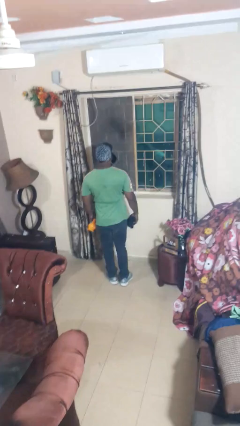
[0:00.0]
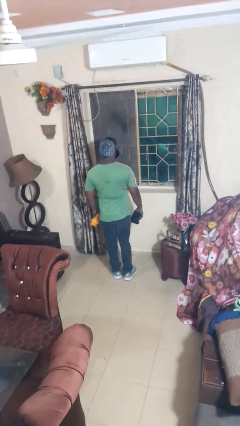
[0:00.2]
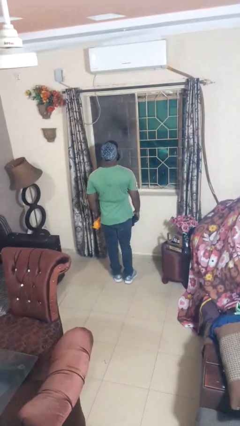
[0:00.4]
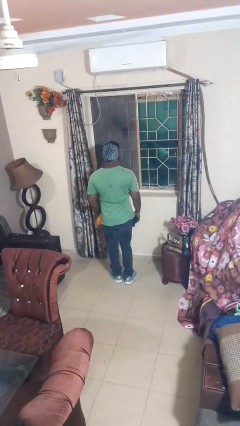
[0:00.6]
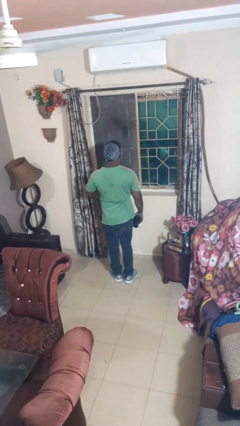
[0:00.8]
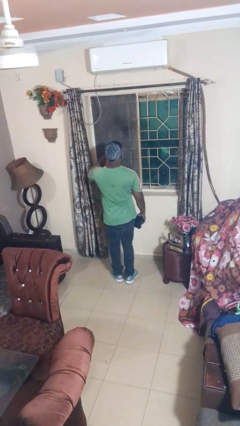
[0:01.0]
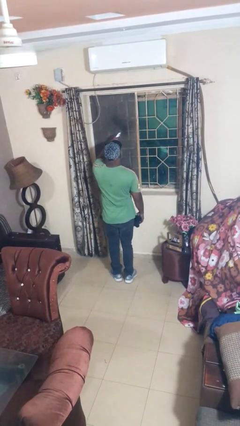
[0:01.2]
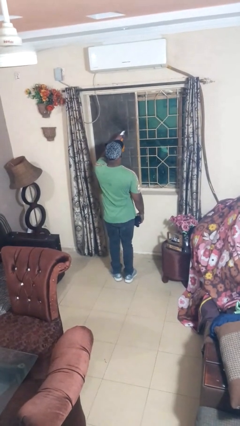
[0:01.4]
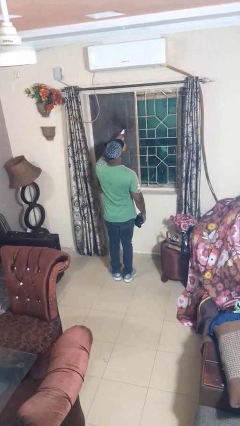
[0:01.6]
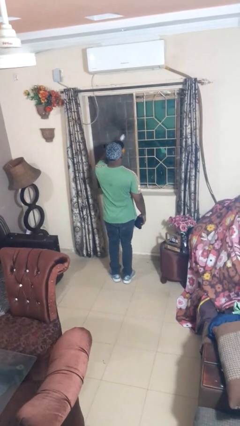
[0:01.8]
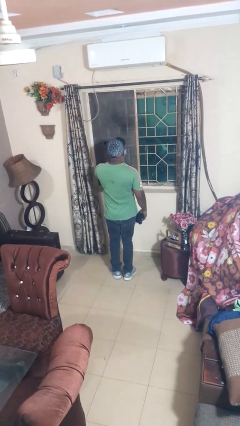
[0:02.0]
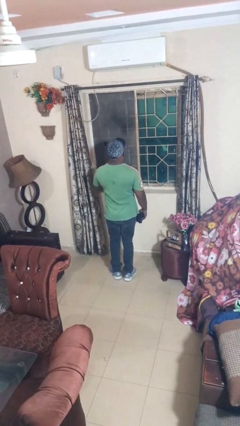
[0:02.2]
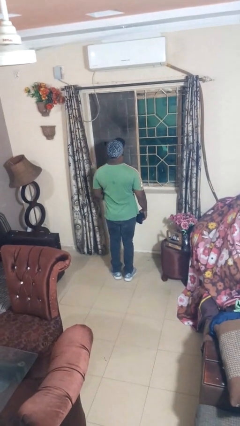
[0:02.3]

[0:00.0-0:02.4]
person sprays from bottle

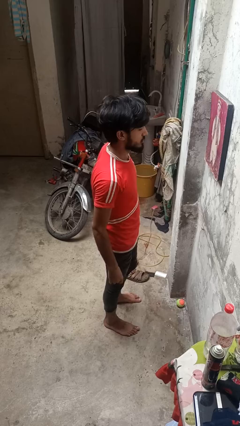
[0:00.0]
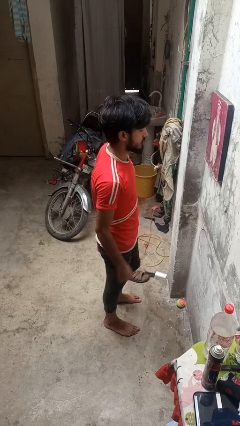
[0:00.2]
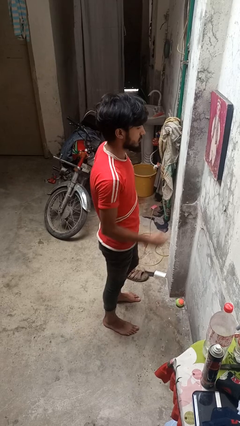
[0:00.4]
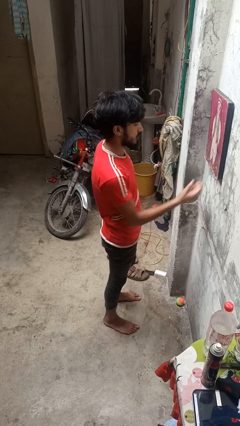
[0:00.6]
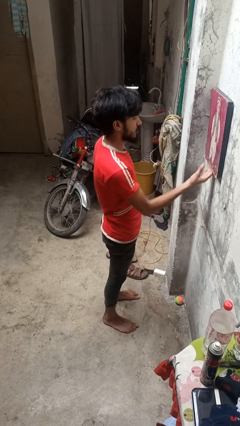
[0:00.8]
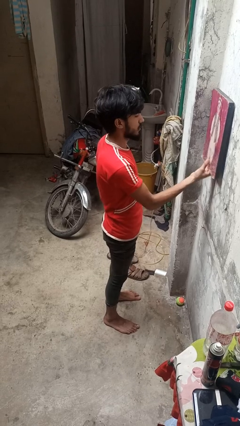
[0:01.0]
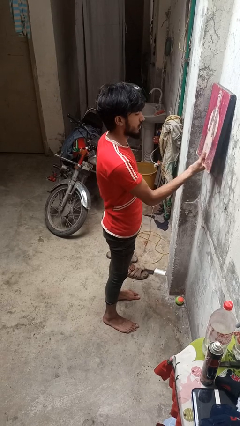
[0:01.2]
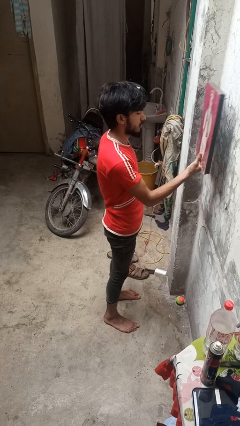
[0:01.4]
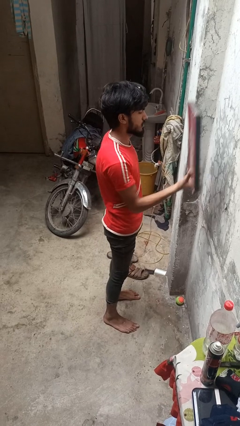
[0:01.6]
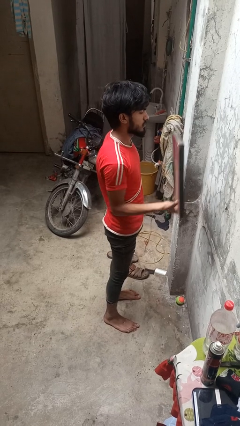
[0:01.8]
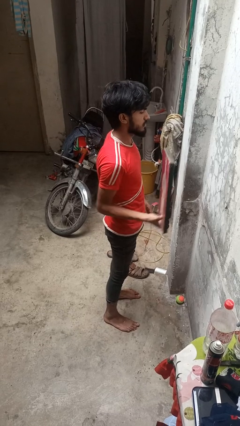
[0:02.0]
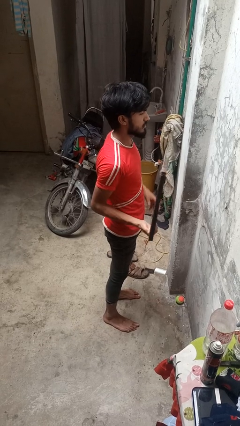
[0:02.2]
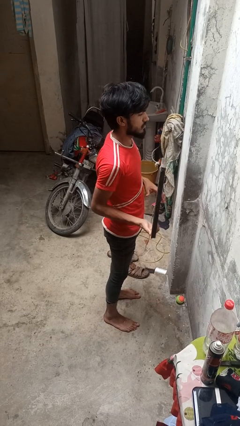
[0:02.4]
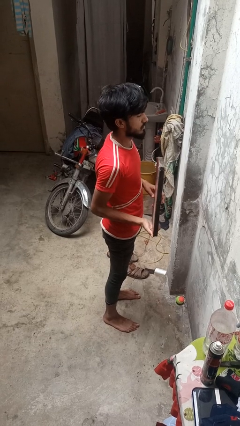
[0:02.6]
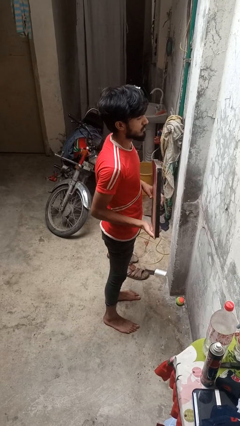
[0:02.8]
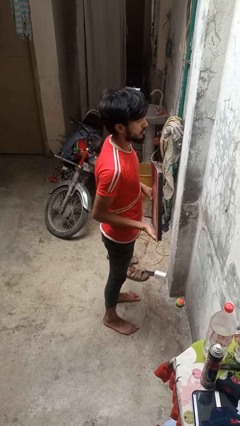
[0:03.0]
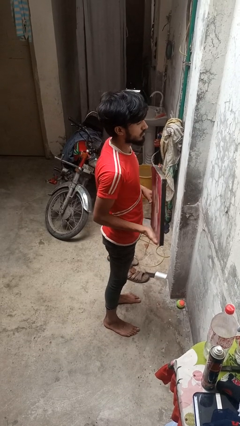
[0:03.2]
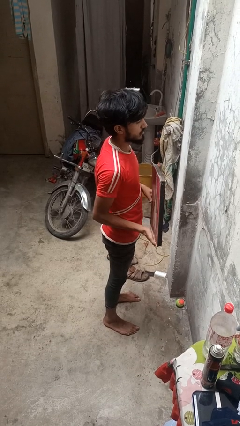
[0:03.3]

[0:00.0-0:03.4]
person takes down picture frame

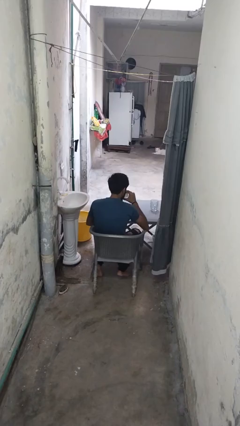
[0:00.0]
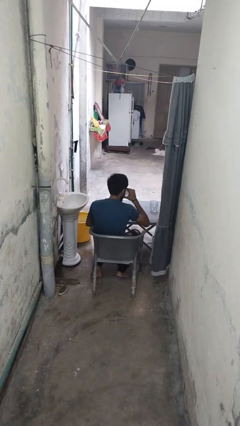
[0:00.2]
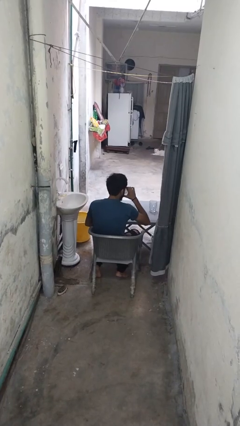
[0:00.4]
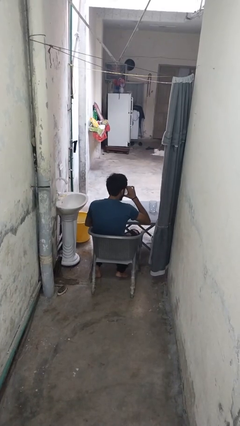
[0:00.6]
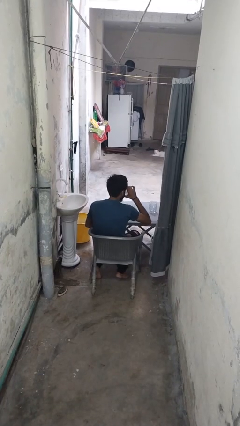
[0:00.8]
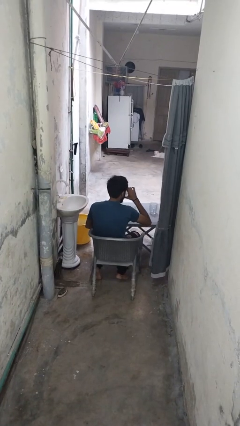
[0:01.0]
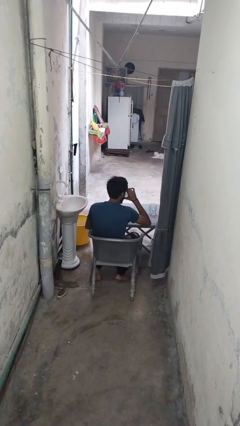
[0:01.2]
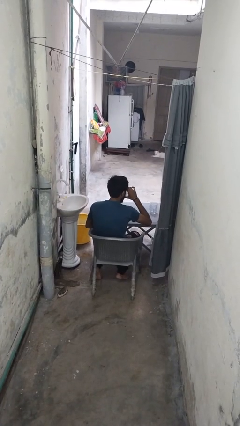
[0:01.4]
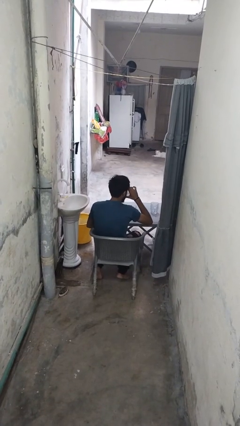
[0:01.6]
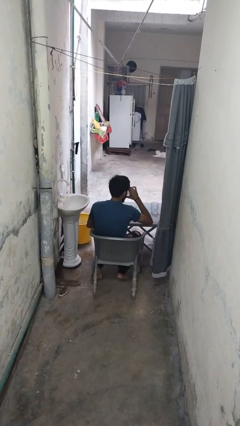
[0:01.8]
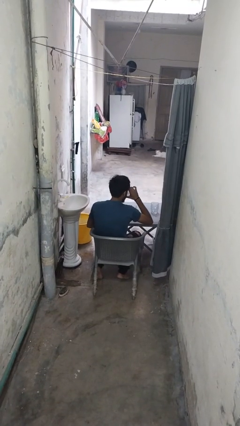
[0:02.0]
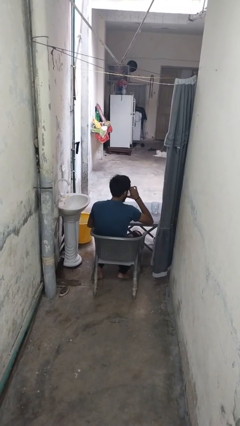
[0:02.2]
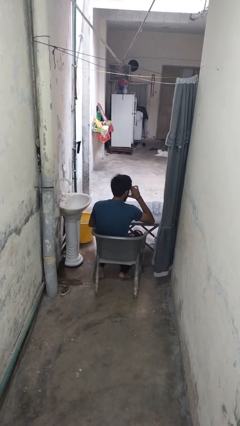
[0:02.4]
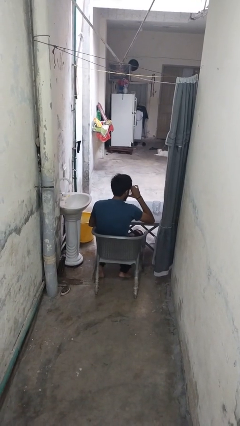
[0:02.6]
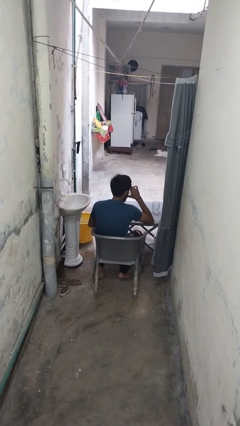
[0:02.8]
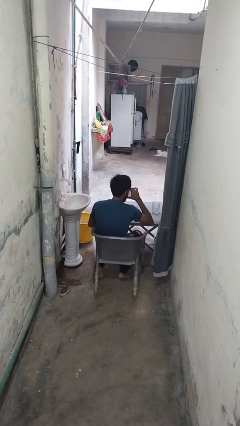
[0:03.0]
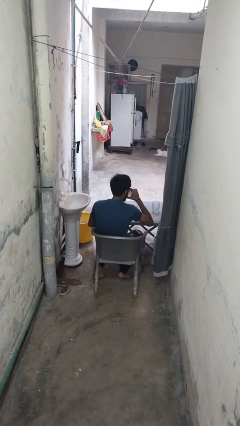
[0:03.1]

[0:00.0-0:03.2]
person drinks from shotglass

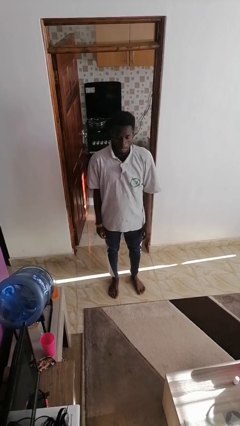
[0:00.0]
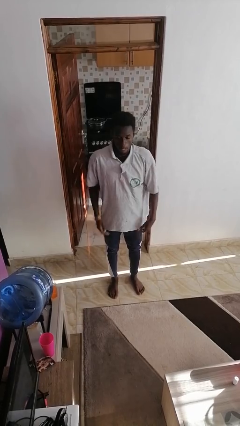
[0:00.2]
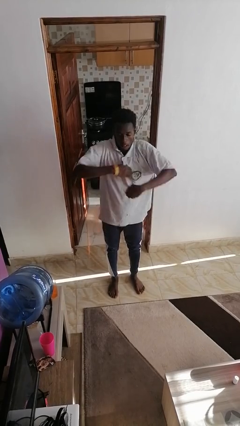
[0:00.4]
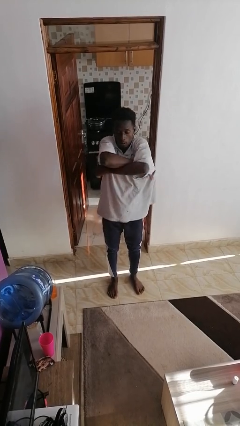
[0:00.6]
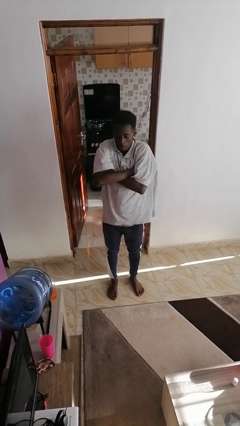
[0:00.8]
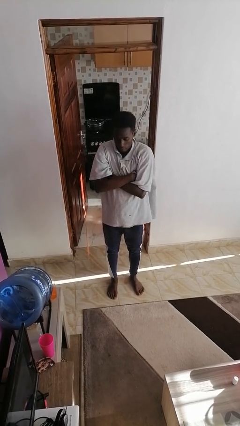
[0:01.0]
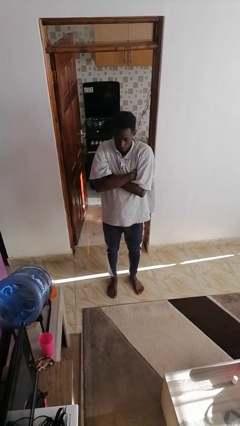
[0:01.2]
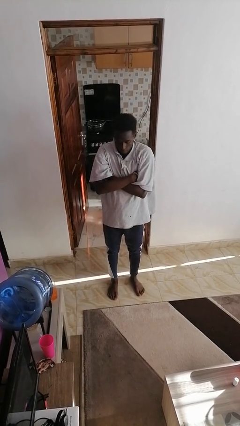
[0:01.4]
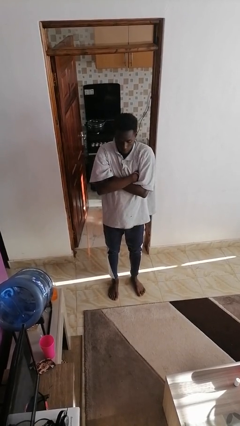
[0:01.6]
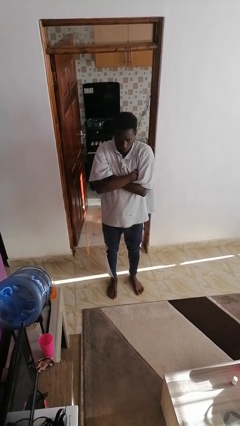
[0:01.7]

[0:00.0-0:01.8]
person crosses arms

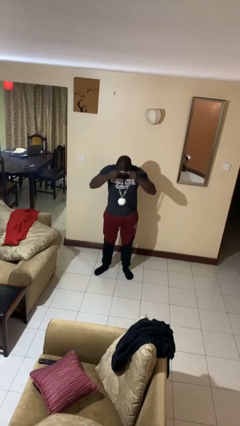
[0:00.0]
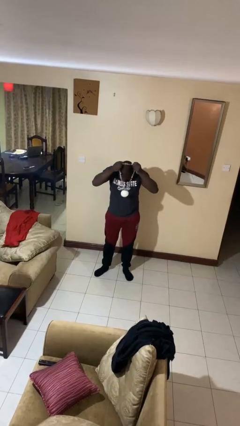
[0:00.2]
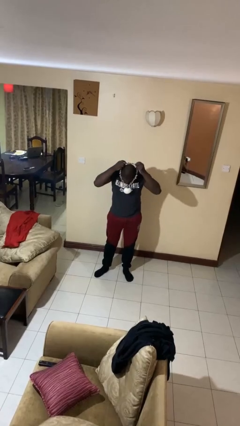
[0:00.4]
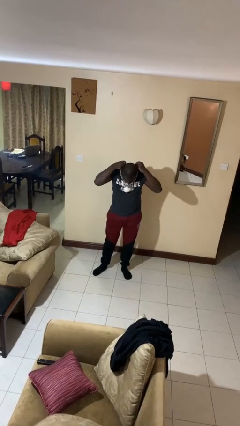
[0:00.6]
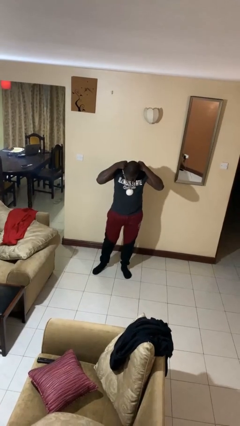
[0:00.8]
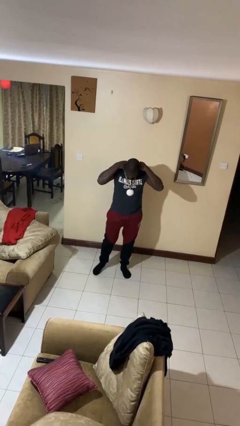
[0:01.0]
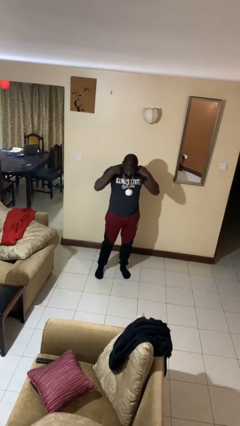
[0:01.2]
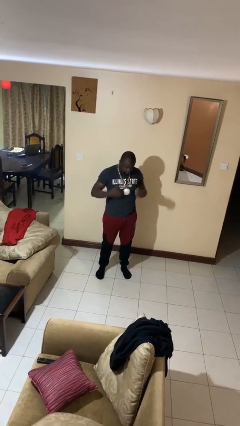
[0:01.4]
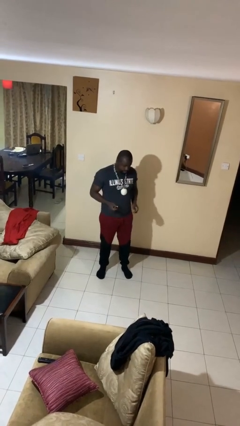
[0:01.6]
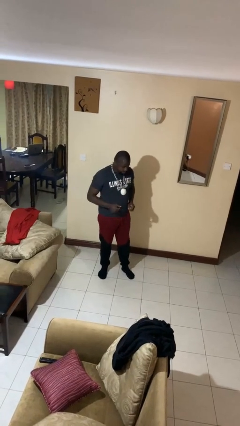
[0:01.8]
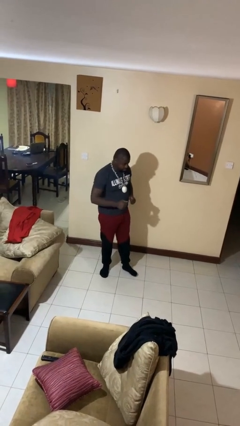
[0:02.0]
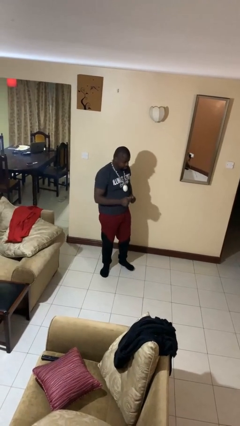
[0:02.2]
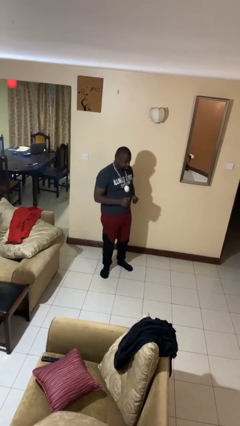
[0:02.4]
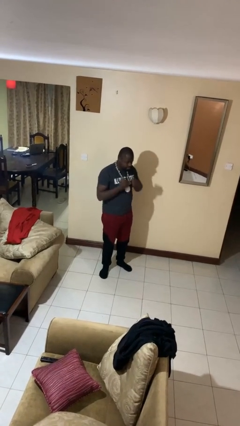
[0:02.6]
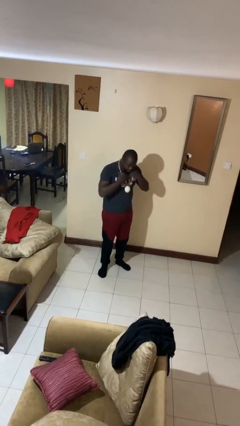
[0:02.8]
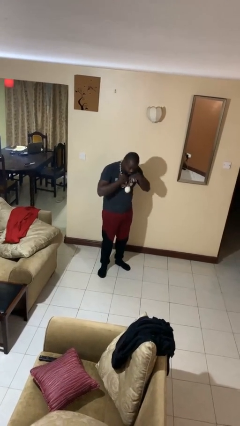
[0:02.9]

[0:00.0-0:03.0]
person puts on necklace

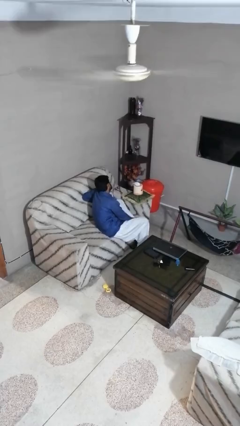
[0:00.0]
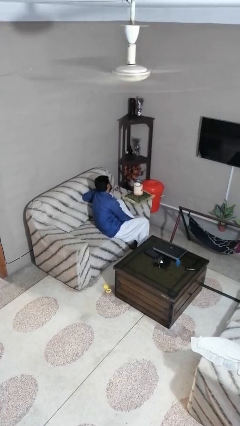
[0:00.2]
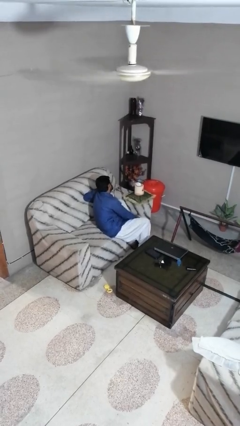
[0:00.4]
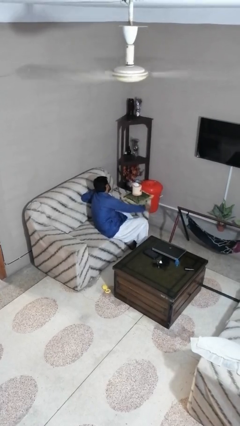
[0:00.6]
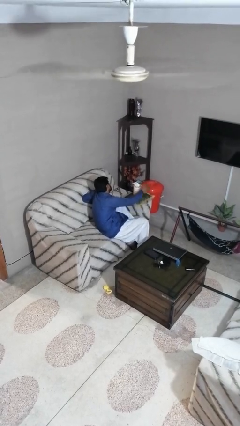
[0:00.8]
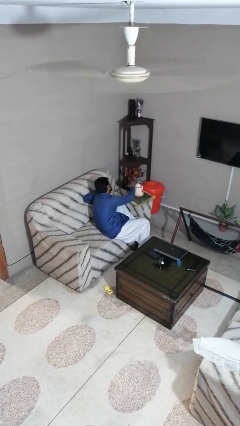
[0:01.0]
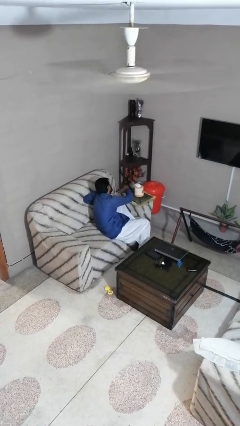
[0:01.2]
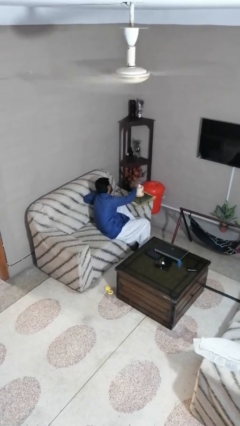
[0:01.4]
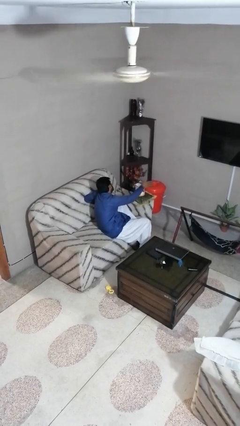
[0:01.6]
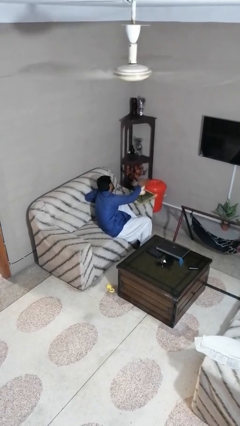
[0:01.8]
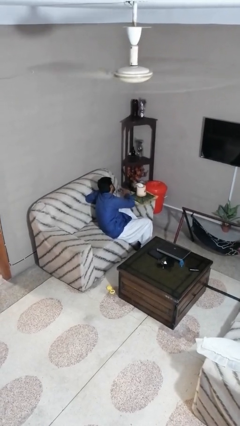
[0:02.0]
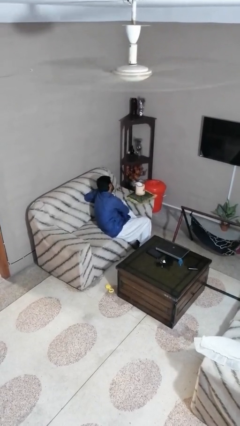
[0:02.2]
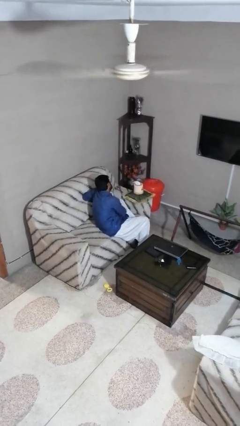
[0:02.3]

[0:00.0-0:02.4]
person waves hand over object

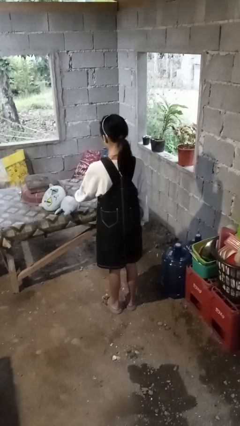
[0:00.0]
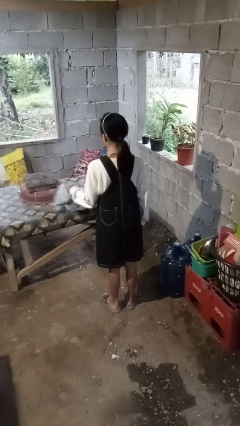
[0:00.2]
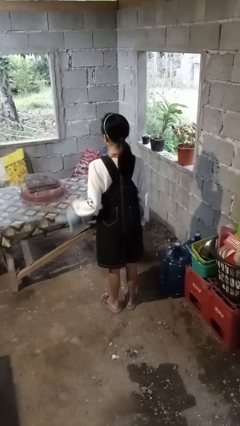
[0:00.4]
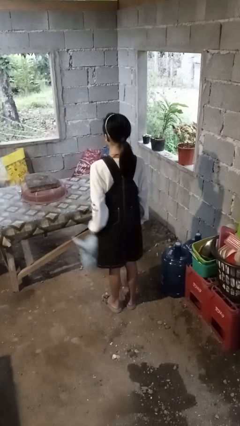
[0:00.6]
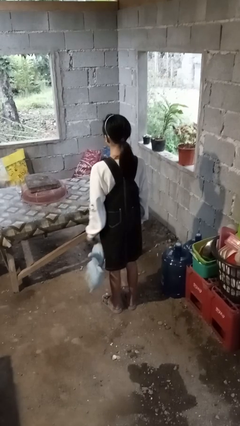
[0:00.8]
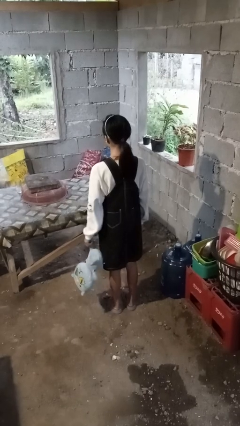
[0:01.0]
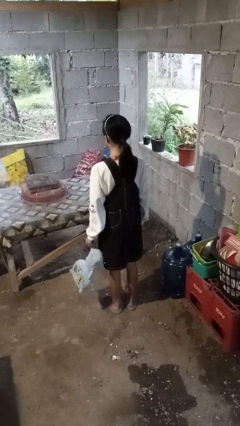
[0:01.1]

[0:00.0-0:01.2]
person picks up object from table
